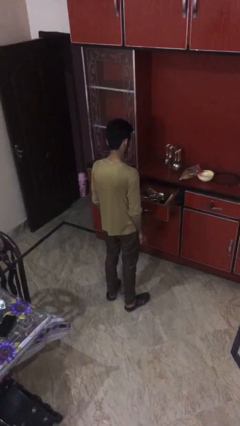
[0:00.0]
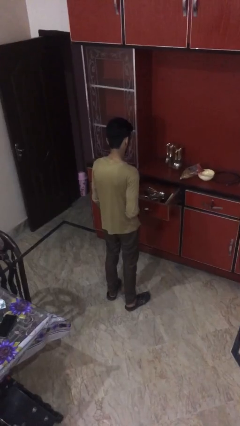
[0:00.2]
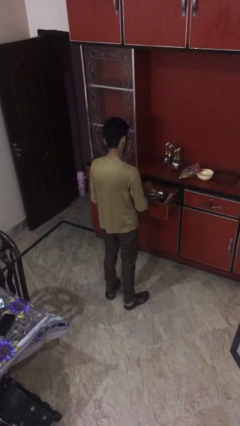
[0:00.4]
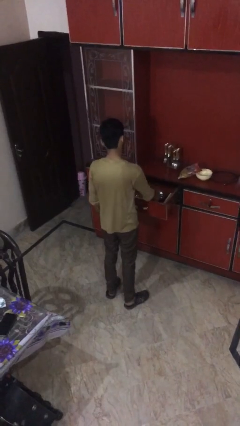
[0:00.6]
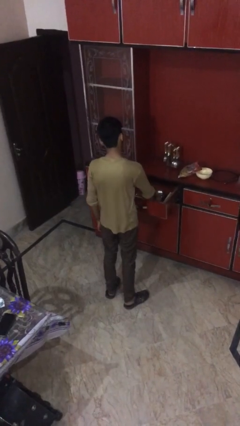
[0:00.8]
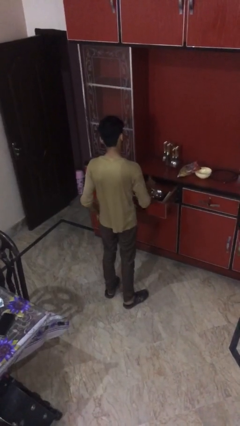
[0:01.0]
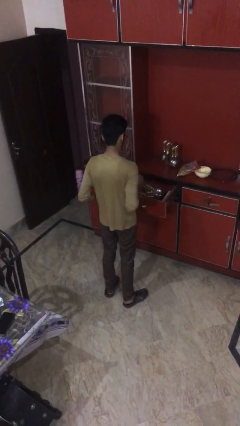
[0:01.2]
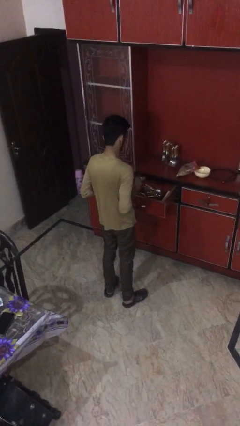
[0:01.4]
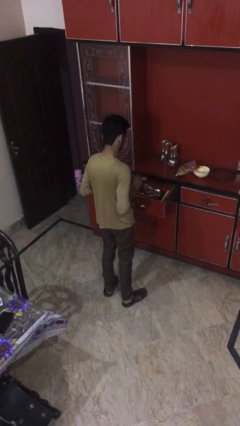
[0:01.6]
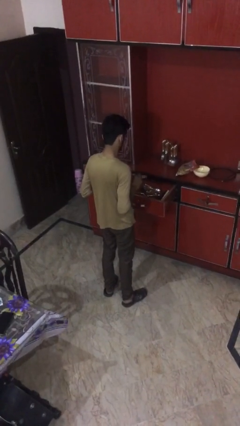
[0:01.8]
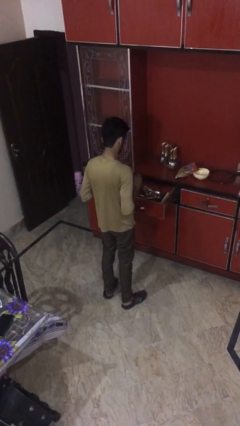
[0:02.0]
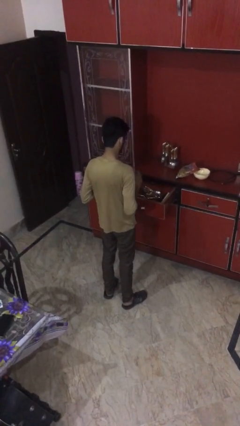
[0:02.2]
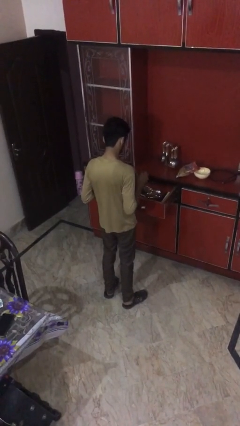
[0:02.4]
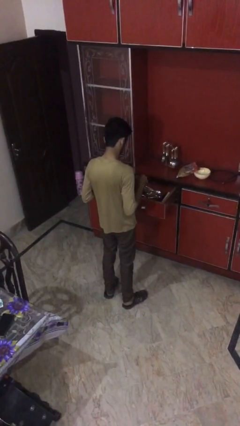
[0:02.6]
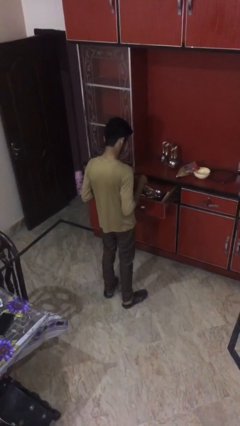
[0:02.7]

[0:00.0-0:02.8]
person takes object from kitchen drawer

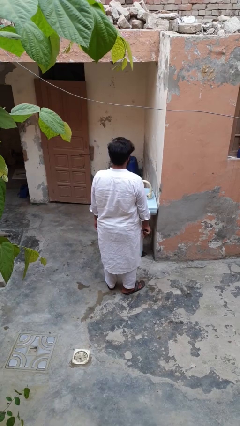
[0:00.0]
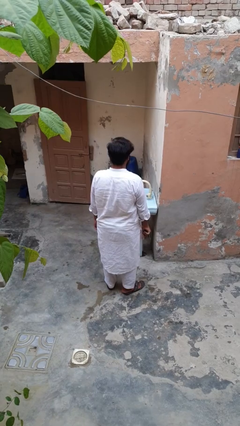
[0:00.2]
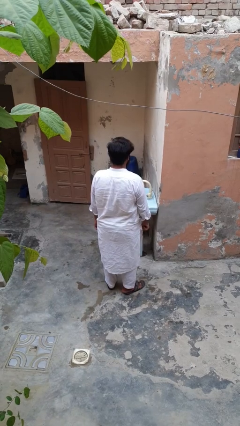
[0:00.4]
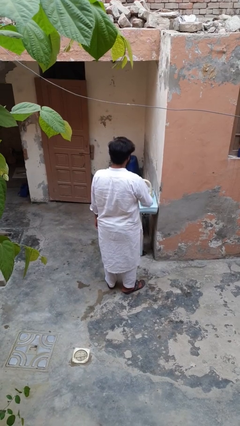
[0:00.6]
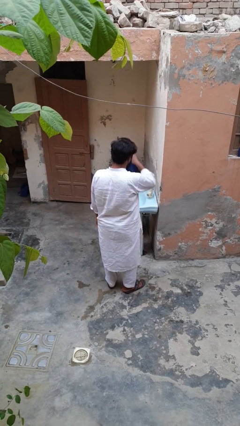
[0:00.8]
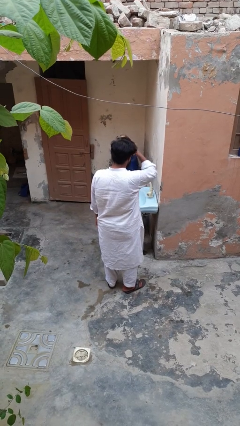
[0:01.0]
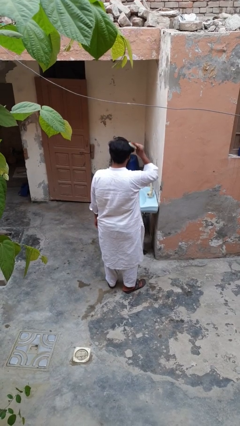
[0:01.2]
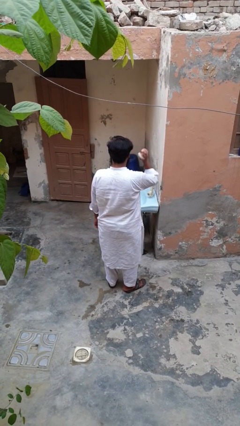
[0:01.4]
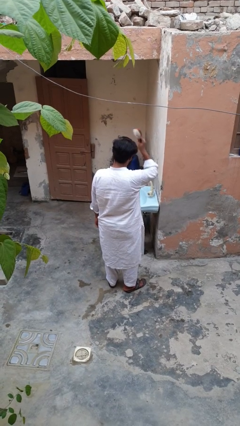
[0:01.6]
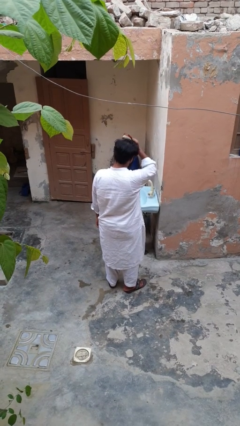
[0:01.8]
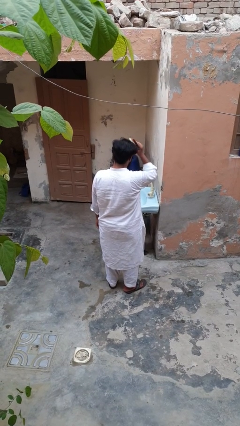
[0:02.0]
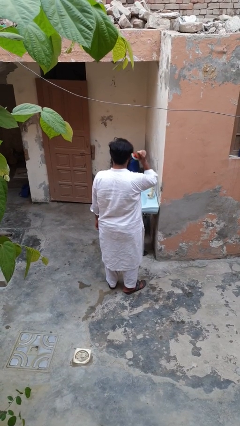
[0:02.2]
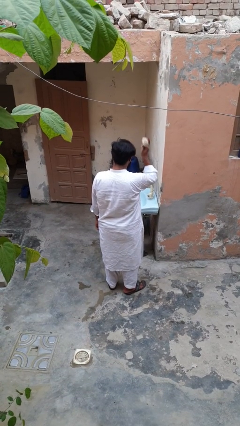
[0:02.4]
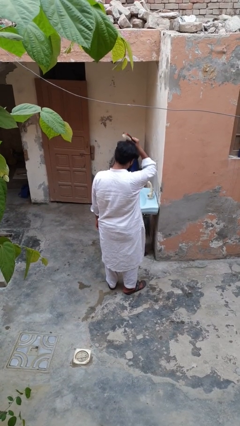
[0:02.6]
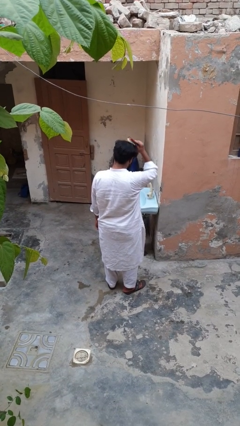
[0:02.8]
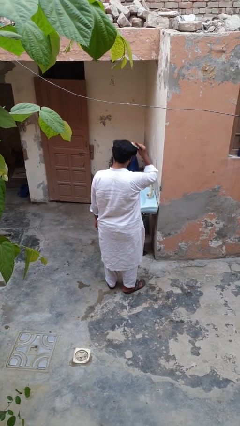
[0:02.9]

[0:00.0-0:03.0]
person brushes hair

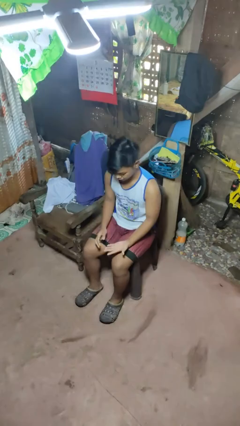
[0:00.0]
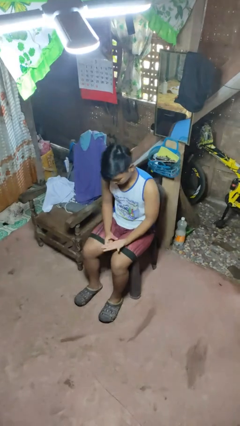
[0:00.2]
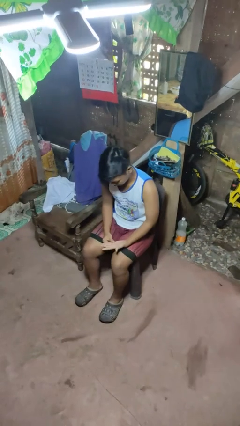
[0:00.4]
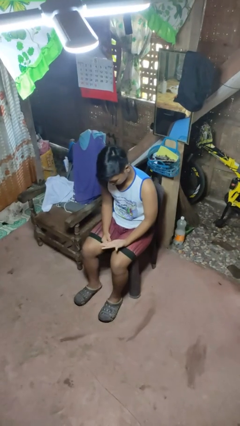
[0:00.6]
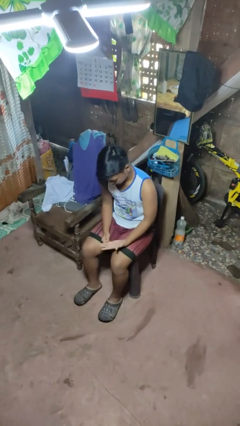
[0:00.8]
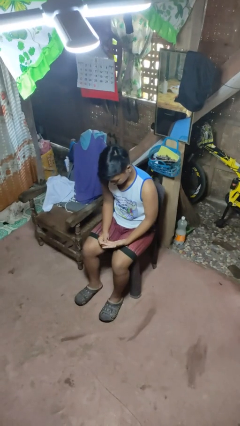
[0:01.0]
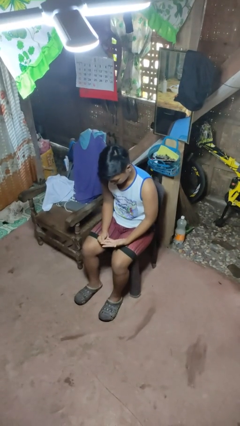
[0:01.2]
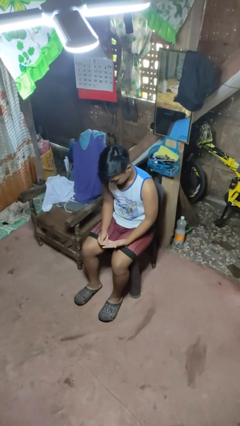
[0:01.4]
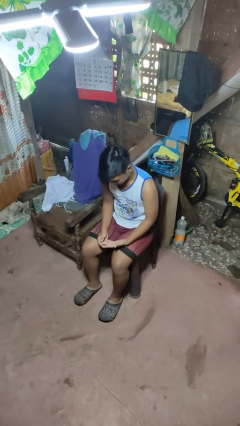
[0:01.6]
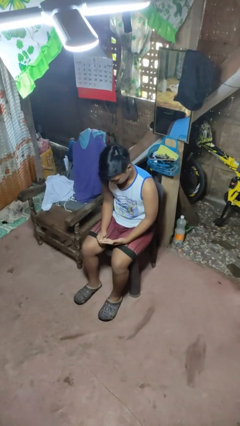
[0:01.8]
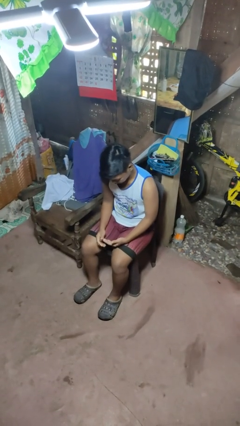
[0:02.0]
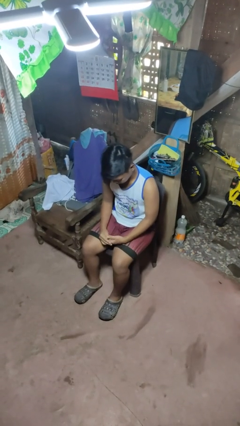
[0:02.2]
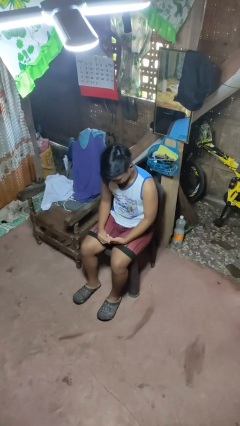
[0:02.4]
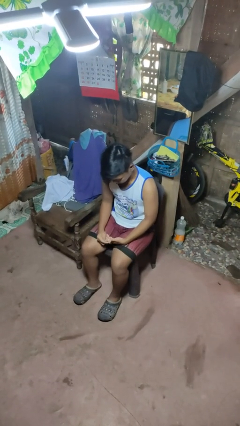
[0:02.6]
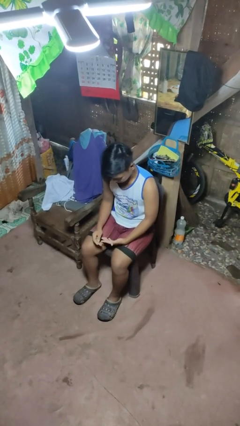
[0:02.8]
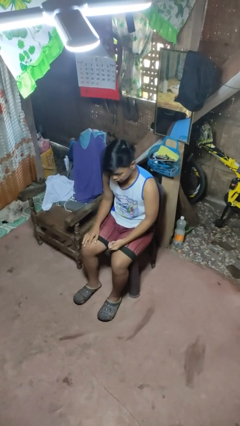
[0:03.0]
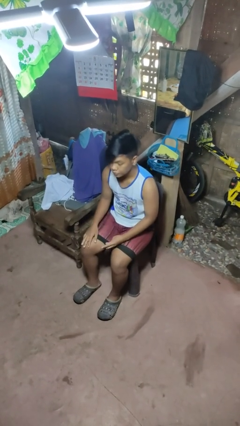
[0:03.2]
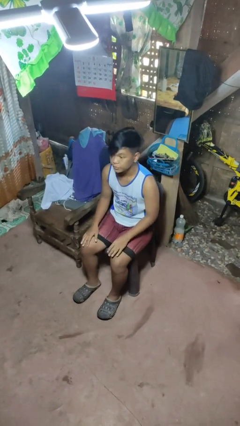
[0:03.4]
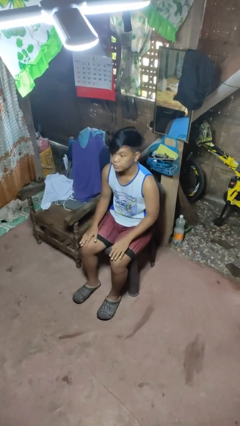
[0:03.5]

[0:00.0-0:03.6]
person looks at hands in lap

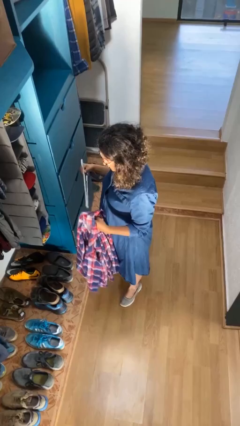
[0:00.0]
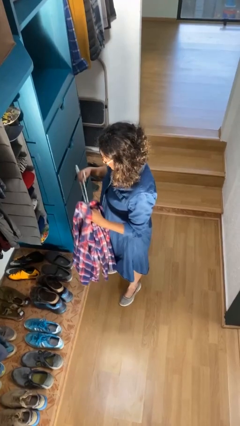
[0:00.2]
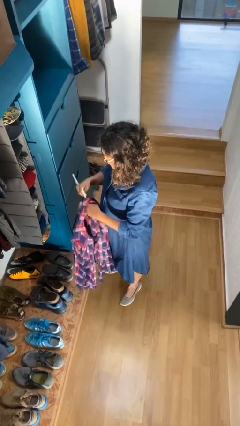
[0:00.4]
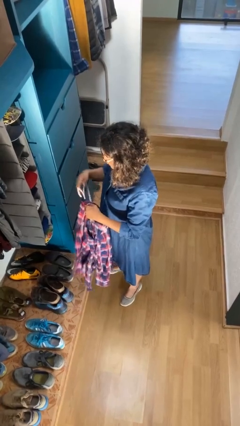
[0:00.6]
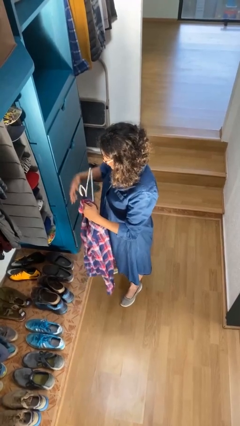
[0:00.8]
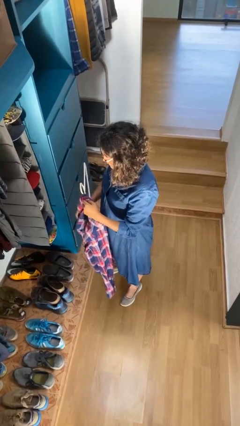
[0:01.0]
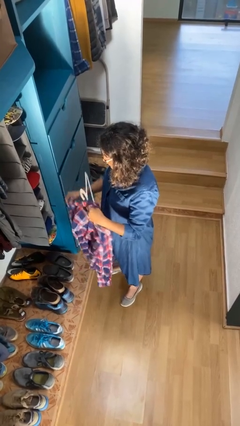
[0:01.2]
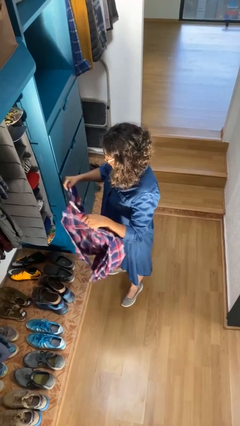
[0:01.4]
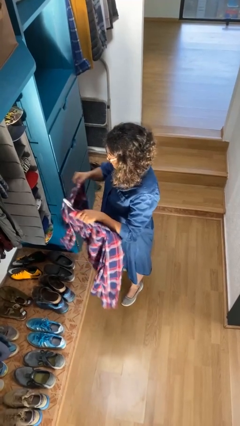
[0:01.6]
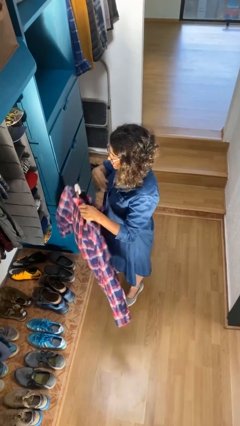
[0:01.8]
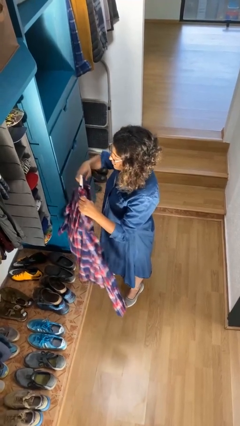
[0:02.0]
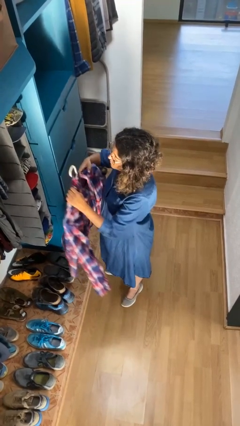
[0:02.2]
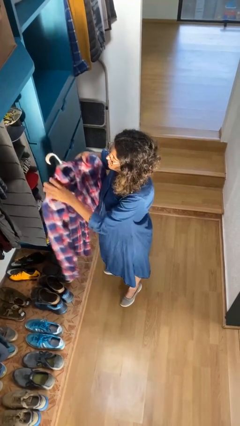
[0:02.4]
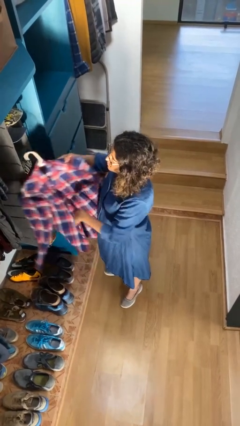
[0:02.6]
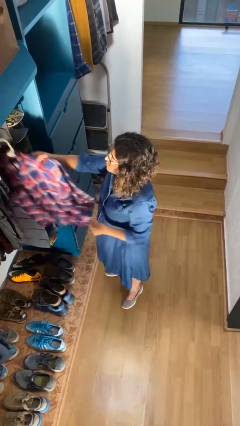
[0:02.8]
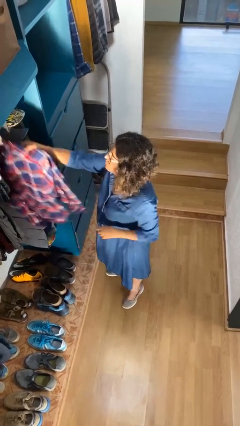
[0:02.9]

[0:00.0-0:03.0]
person puts clothes into closet

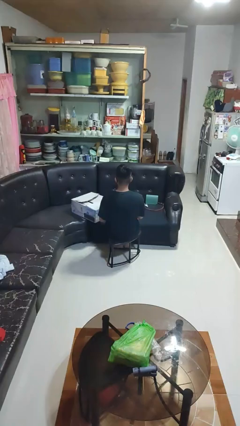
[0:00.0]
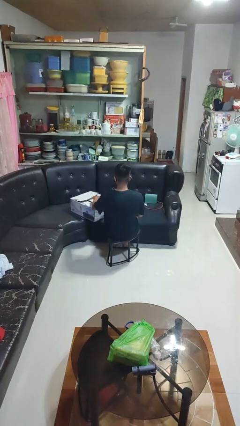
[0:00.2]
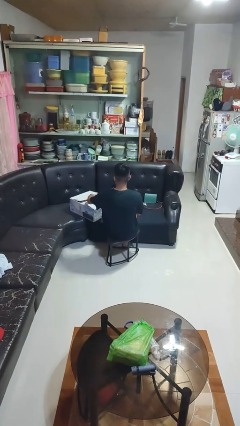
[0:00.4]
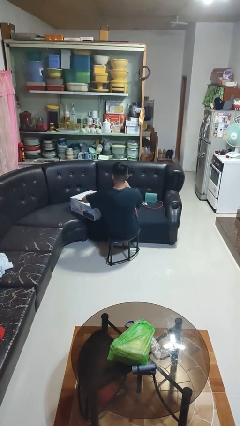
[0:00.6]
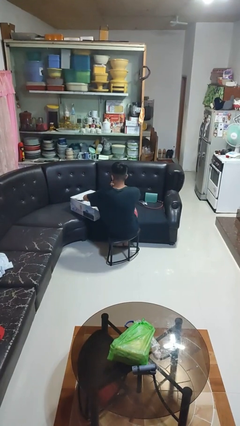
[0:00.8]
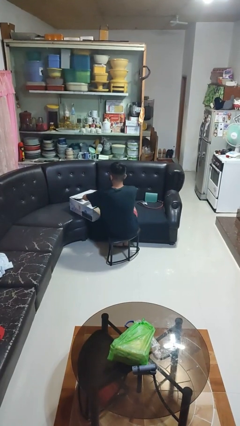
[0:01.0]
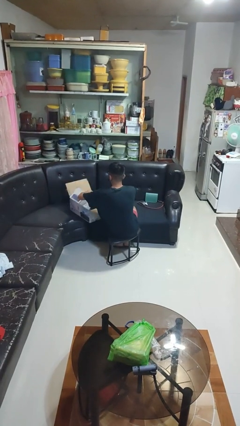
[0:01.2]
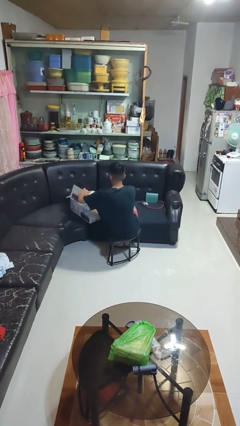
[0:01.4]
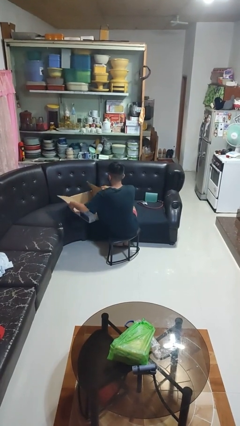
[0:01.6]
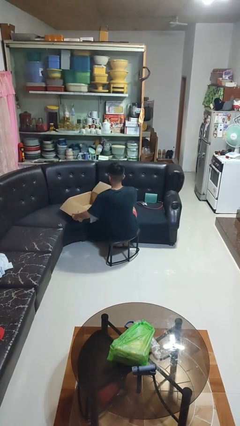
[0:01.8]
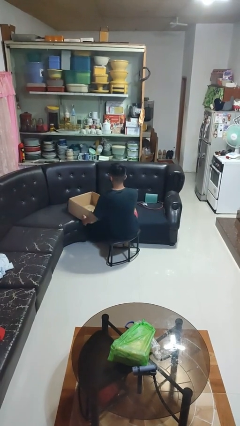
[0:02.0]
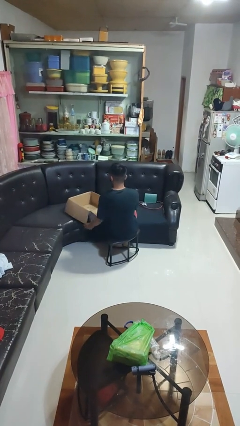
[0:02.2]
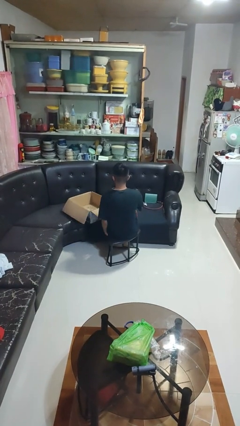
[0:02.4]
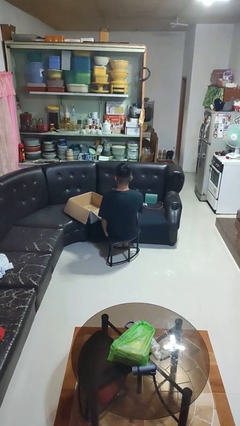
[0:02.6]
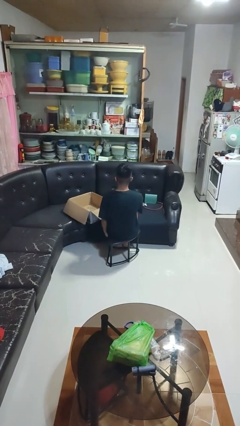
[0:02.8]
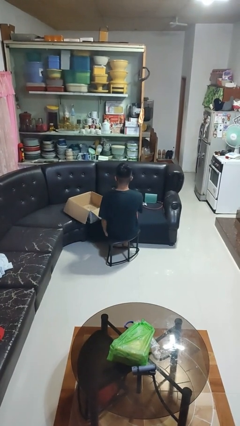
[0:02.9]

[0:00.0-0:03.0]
person opens box

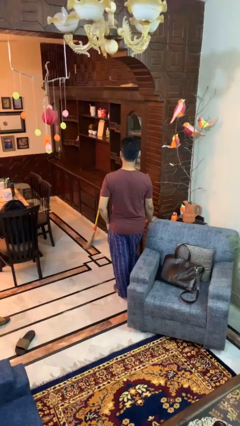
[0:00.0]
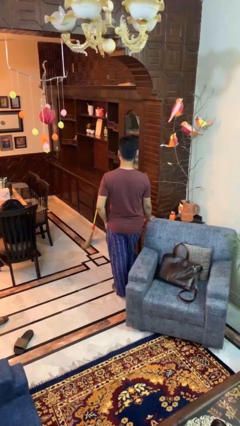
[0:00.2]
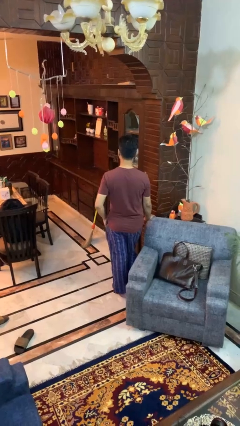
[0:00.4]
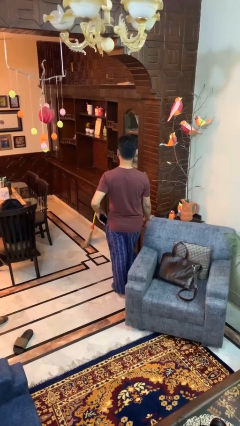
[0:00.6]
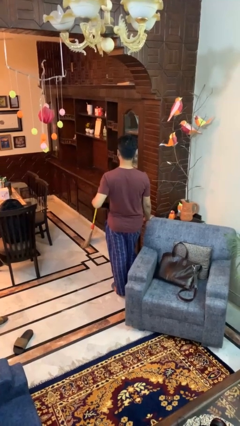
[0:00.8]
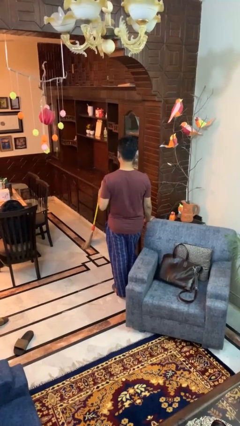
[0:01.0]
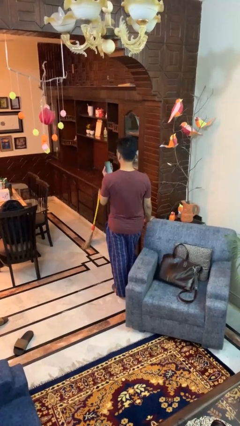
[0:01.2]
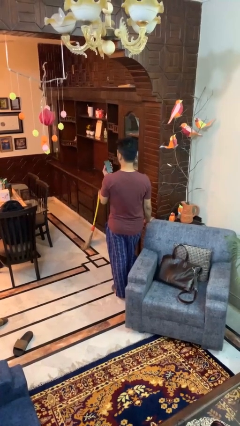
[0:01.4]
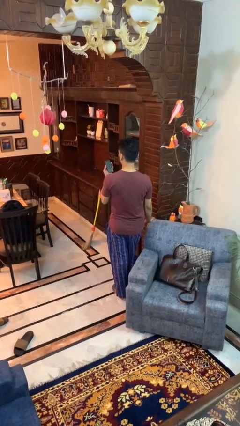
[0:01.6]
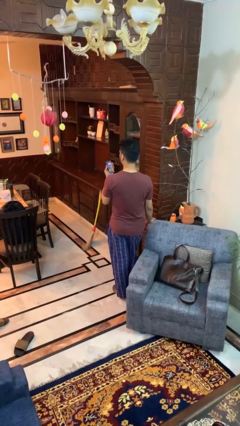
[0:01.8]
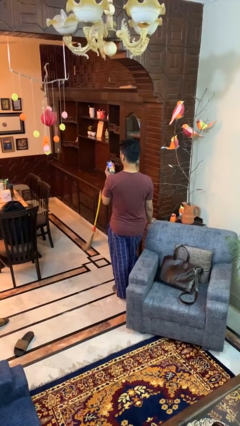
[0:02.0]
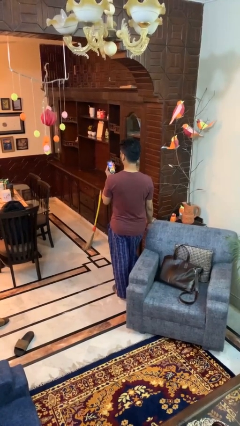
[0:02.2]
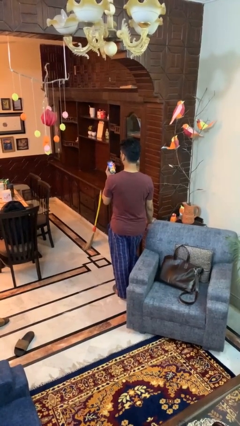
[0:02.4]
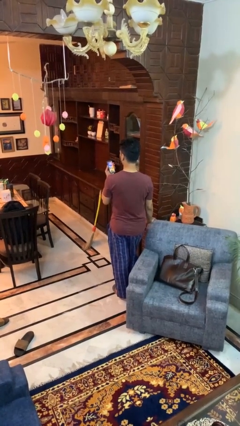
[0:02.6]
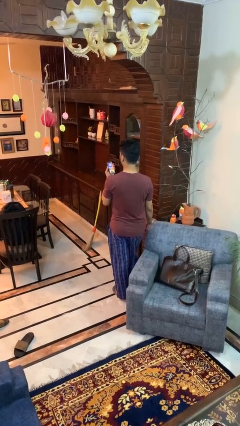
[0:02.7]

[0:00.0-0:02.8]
person takes phone from pocket
